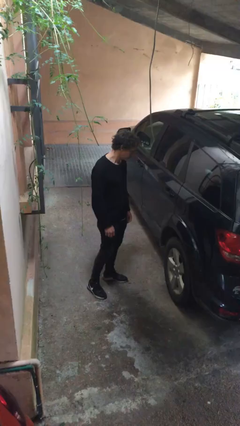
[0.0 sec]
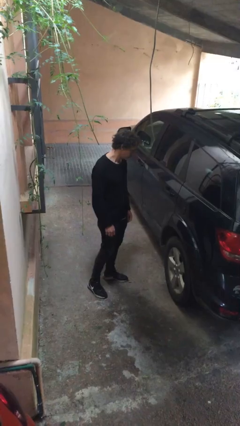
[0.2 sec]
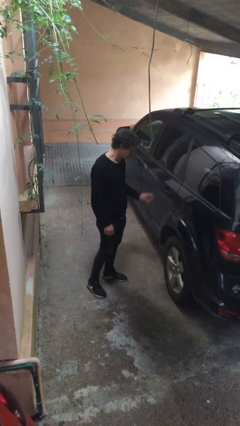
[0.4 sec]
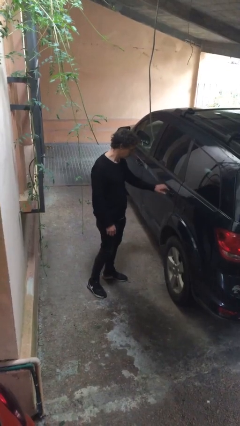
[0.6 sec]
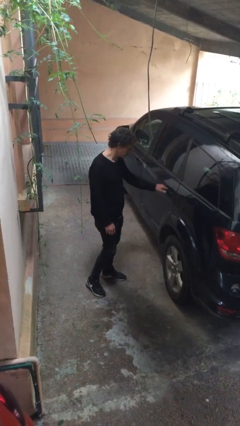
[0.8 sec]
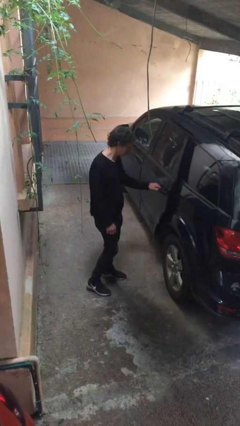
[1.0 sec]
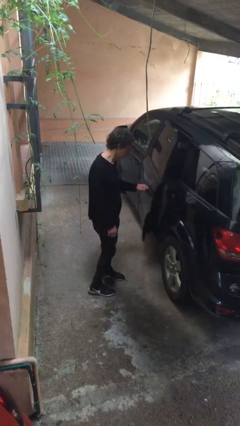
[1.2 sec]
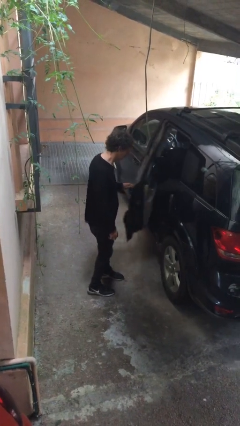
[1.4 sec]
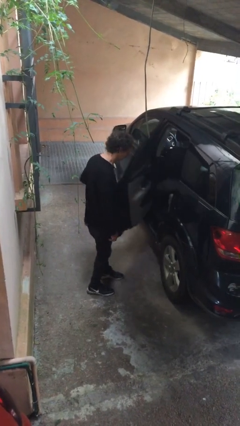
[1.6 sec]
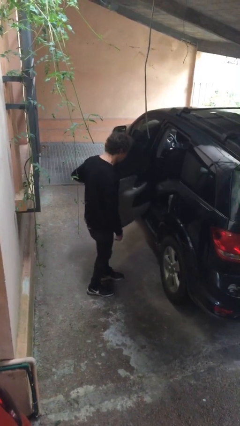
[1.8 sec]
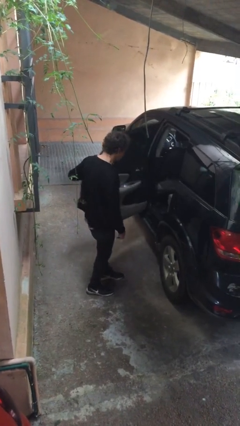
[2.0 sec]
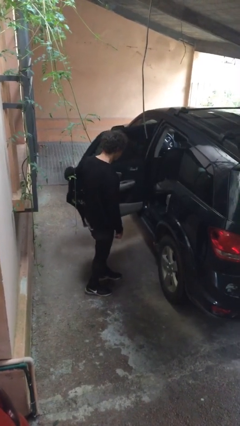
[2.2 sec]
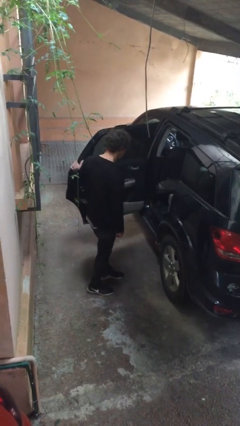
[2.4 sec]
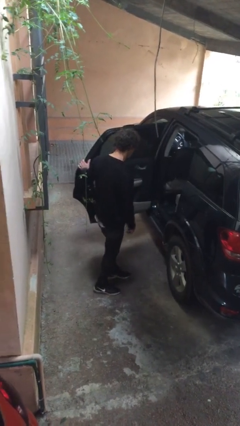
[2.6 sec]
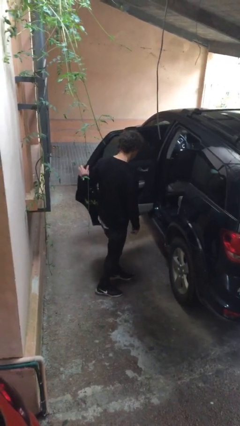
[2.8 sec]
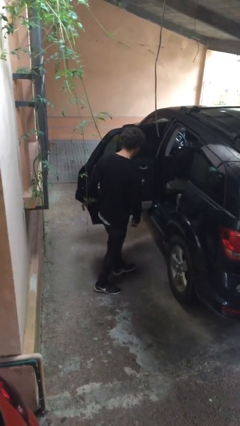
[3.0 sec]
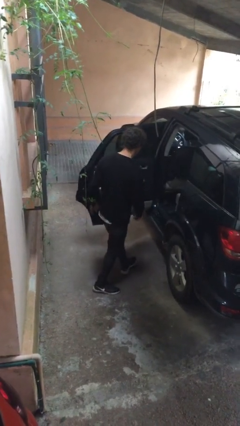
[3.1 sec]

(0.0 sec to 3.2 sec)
person opens car door

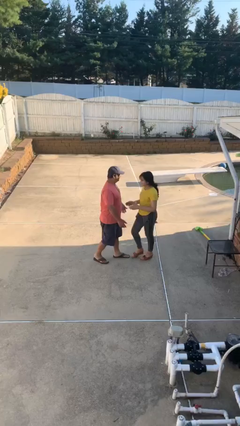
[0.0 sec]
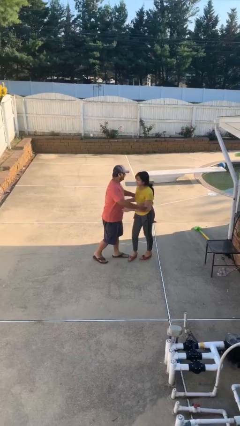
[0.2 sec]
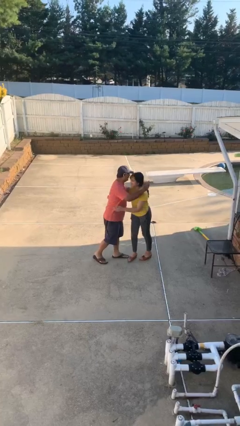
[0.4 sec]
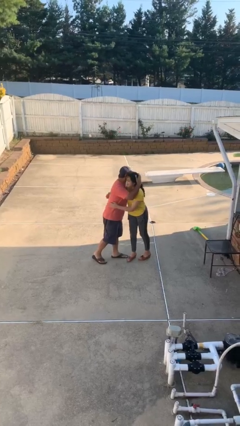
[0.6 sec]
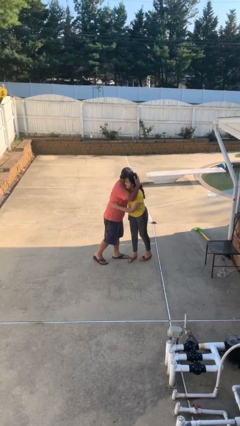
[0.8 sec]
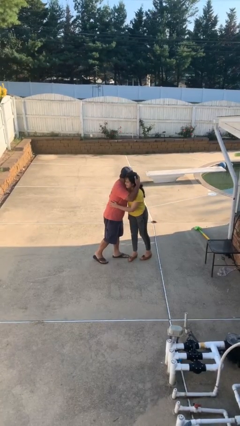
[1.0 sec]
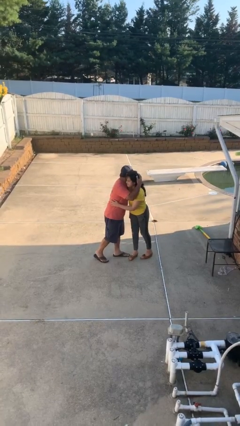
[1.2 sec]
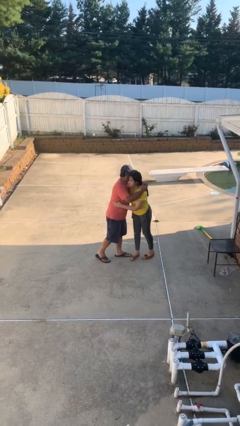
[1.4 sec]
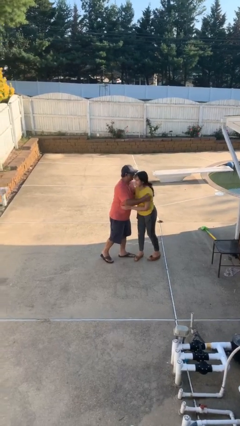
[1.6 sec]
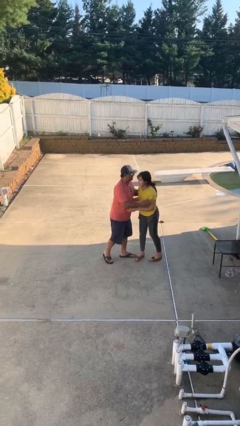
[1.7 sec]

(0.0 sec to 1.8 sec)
person embraces person

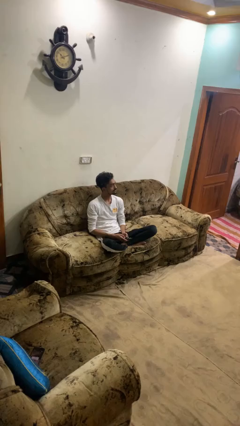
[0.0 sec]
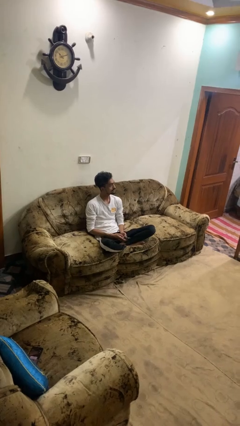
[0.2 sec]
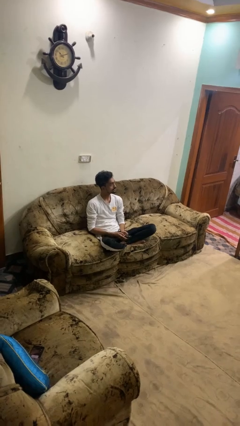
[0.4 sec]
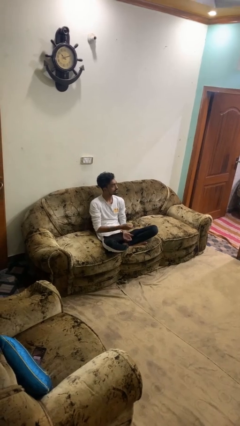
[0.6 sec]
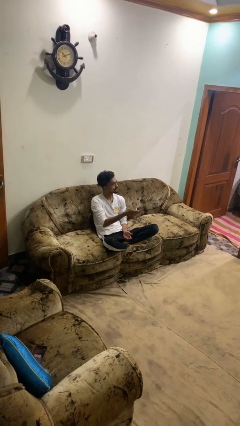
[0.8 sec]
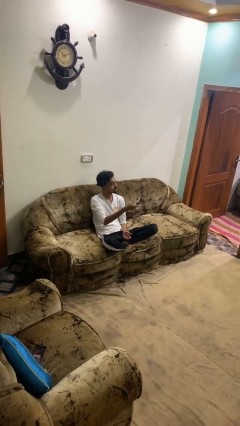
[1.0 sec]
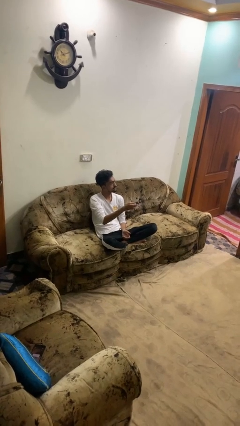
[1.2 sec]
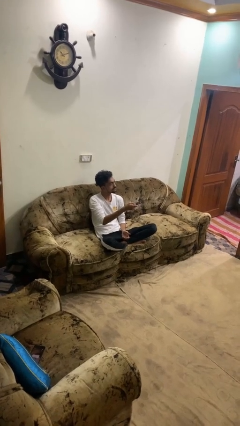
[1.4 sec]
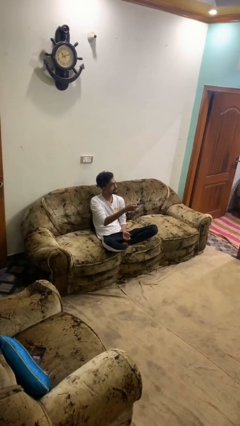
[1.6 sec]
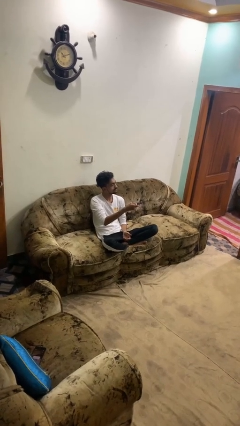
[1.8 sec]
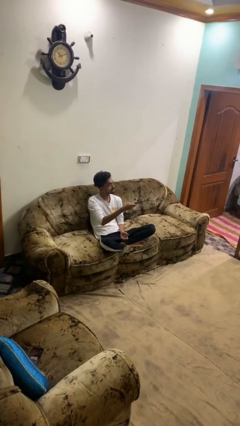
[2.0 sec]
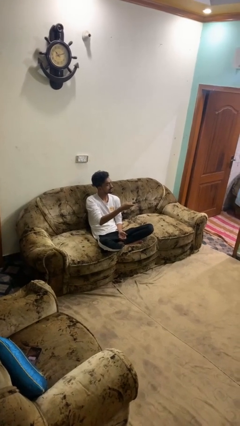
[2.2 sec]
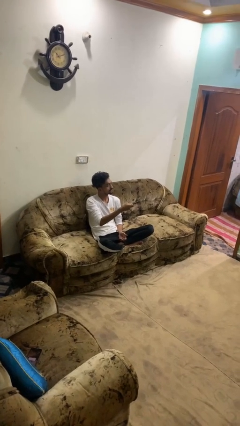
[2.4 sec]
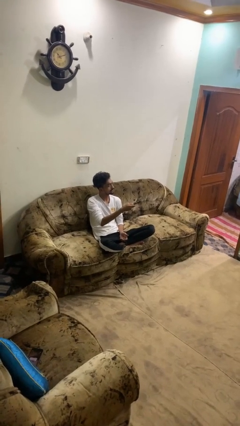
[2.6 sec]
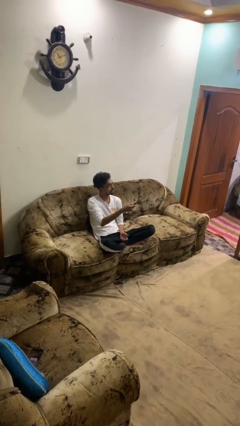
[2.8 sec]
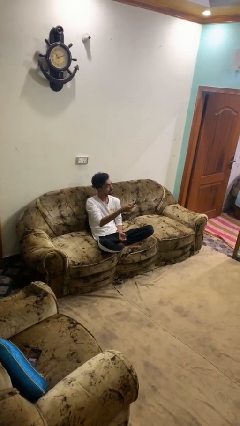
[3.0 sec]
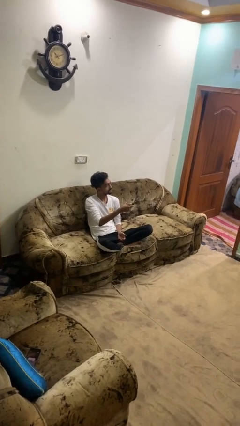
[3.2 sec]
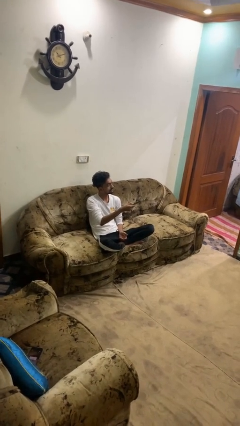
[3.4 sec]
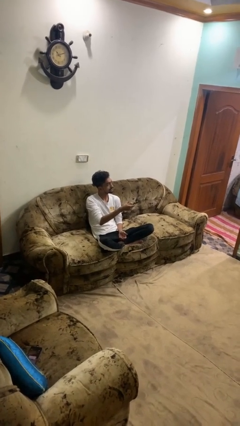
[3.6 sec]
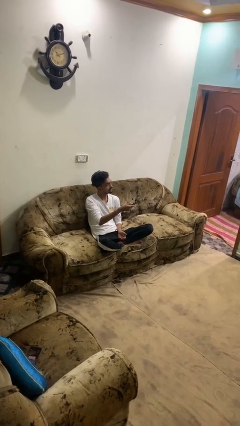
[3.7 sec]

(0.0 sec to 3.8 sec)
person uses television remote

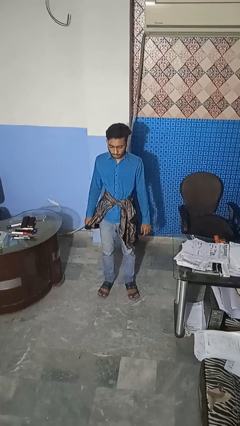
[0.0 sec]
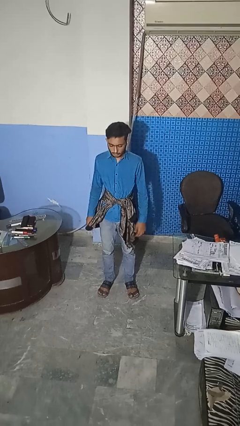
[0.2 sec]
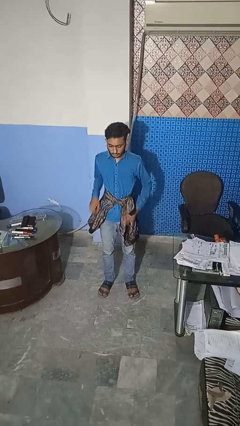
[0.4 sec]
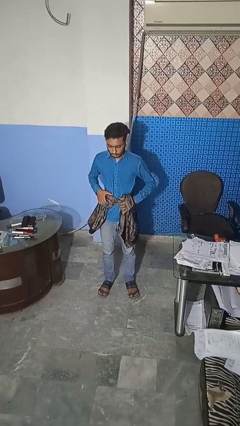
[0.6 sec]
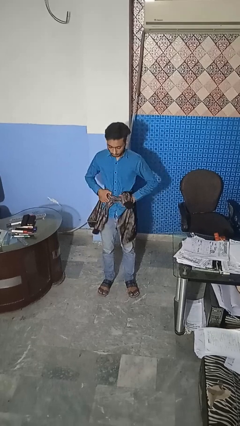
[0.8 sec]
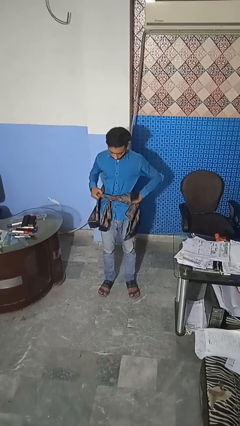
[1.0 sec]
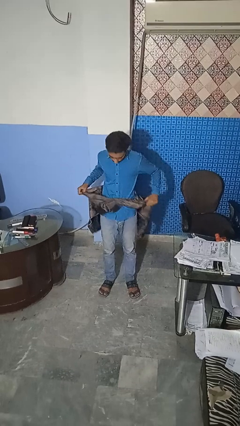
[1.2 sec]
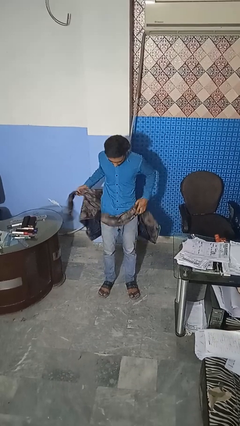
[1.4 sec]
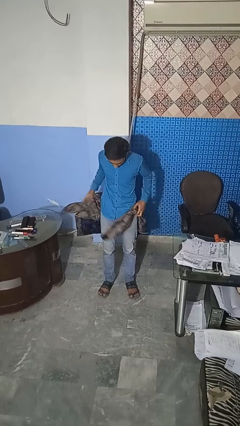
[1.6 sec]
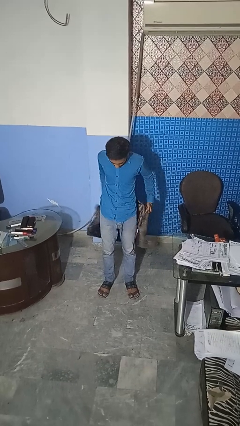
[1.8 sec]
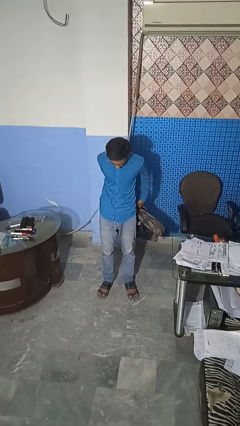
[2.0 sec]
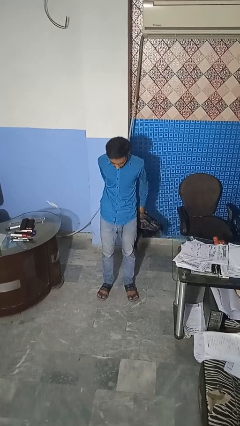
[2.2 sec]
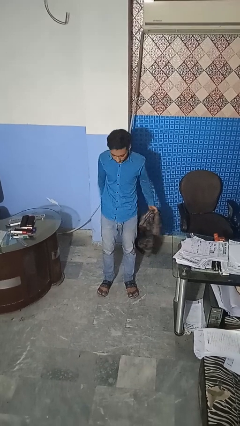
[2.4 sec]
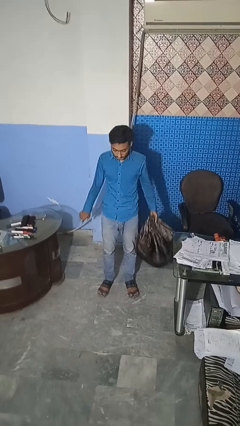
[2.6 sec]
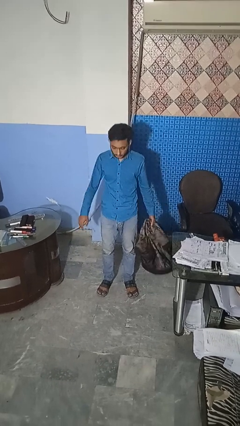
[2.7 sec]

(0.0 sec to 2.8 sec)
person unties jacket around waist

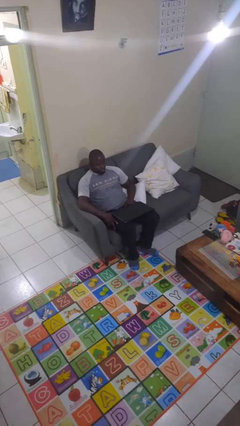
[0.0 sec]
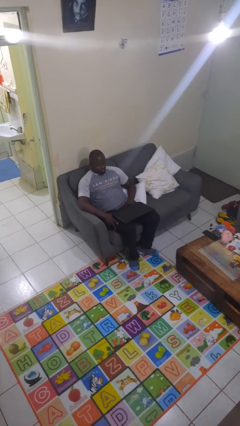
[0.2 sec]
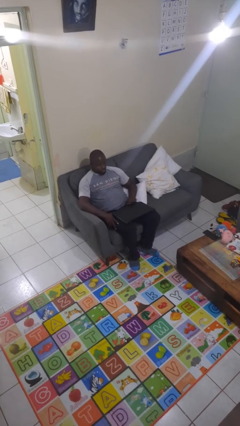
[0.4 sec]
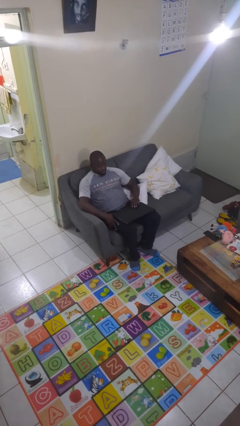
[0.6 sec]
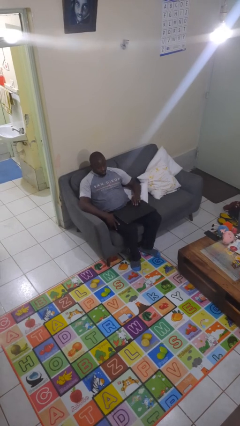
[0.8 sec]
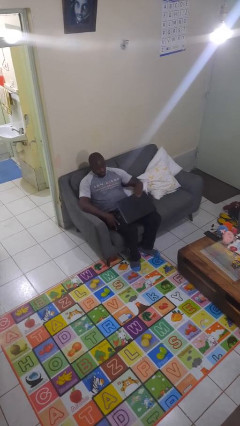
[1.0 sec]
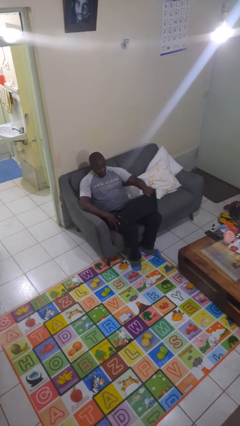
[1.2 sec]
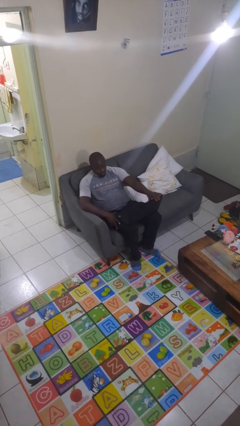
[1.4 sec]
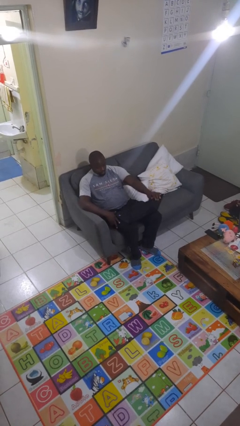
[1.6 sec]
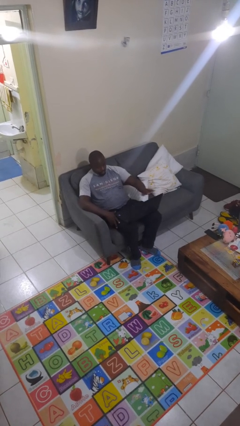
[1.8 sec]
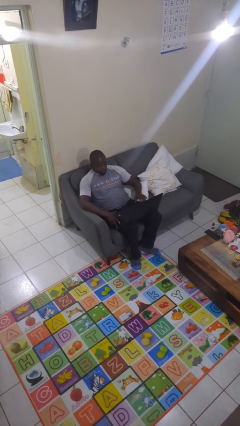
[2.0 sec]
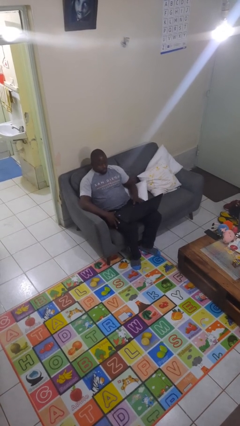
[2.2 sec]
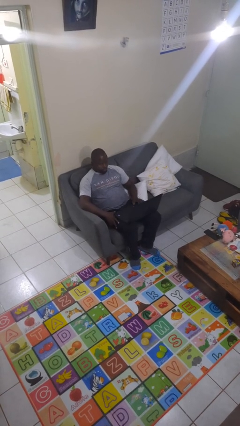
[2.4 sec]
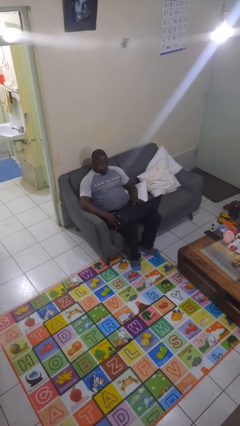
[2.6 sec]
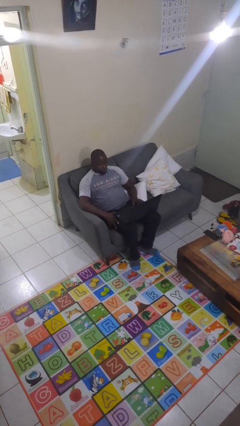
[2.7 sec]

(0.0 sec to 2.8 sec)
person opens laptop

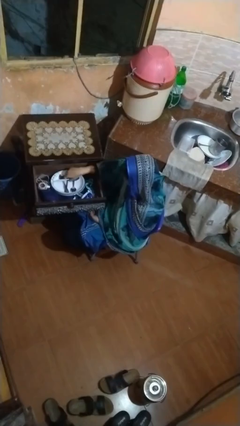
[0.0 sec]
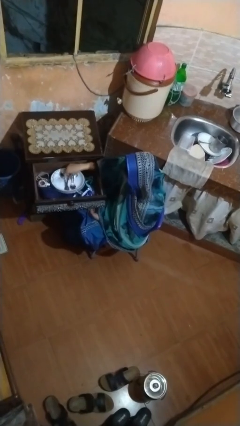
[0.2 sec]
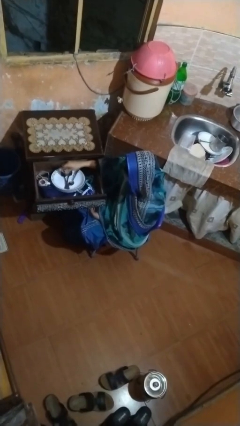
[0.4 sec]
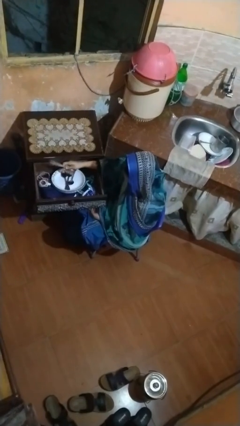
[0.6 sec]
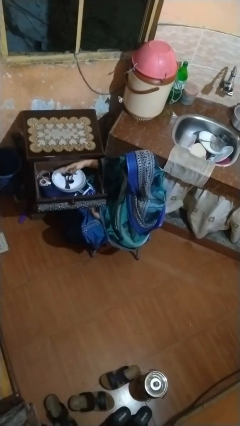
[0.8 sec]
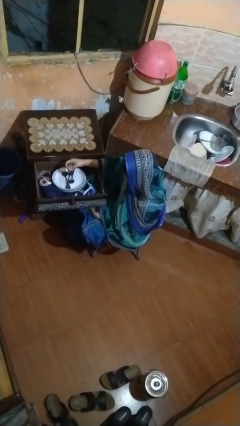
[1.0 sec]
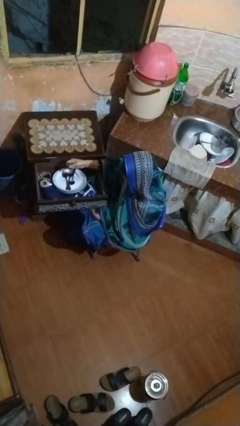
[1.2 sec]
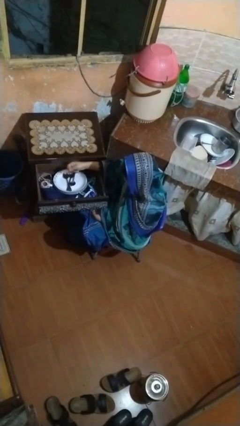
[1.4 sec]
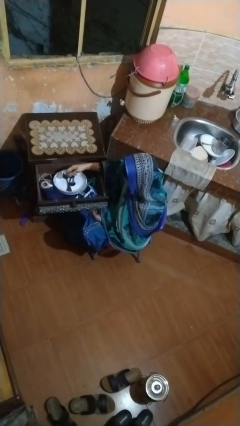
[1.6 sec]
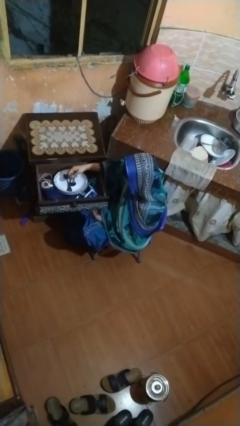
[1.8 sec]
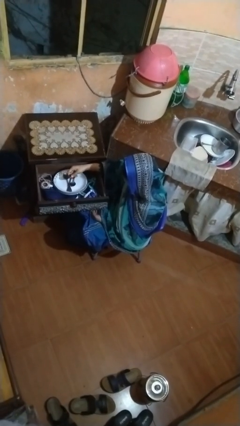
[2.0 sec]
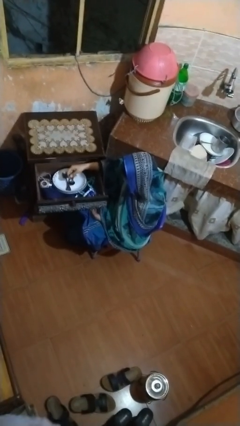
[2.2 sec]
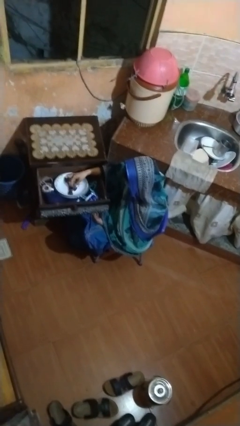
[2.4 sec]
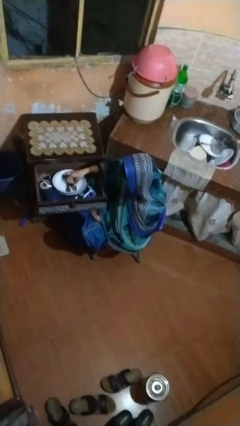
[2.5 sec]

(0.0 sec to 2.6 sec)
person takes object from kitchen drawer

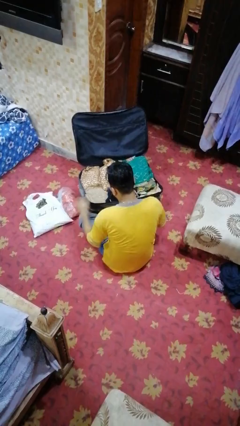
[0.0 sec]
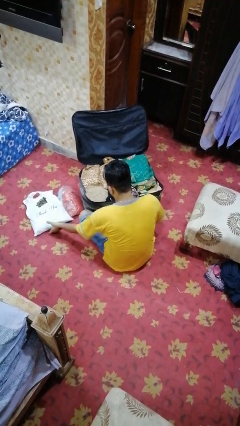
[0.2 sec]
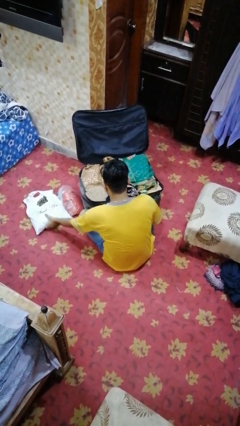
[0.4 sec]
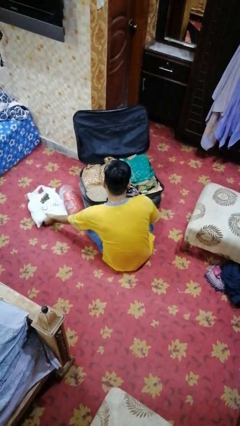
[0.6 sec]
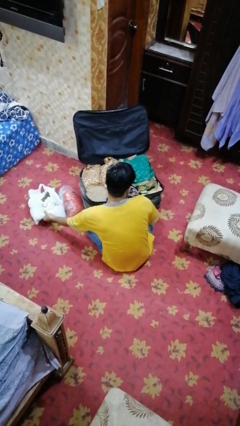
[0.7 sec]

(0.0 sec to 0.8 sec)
person loads clothes into suitcase
